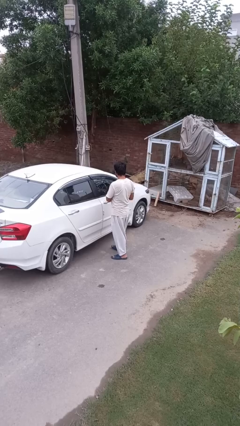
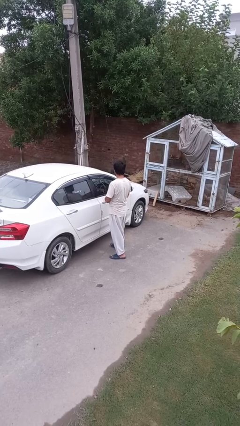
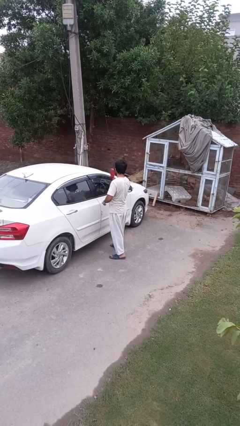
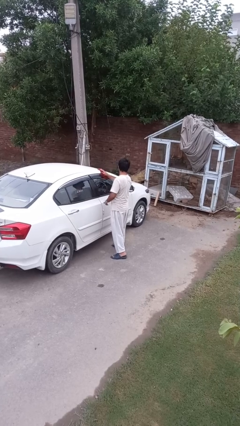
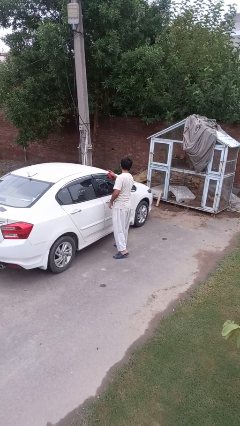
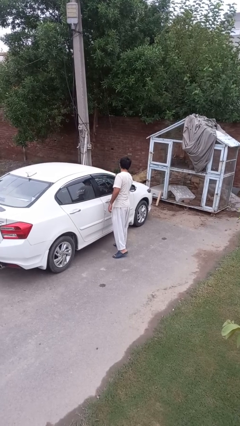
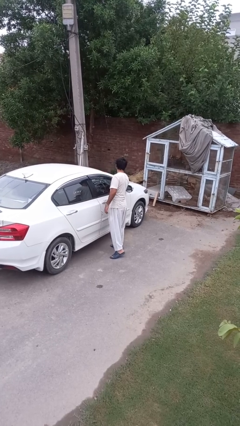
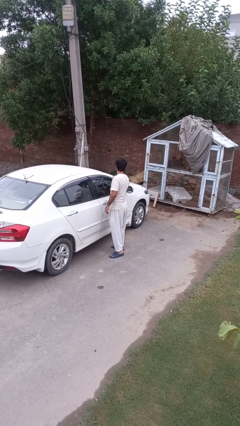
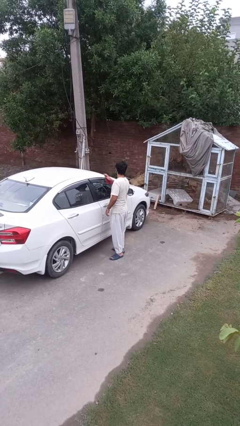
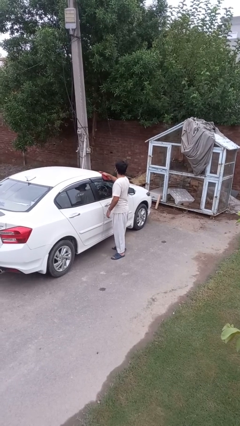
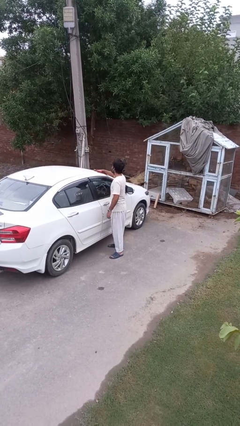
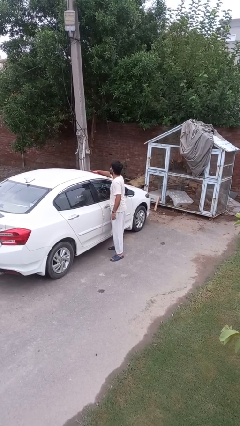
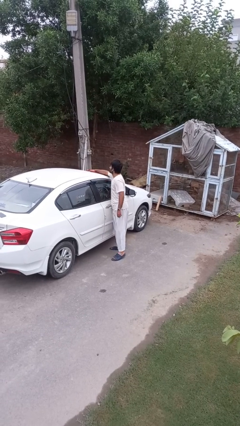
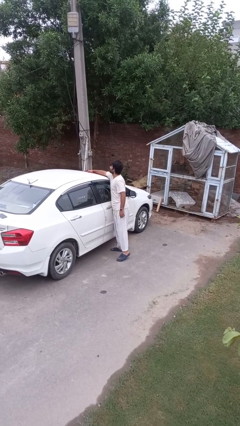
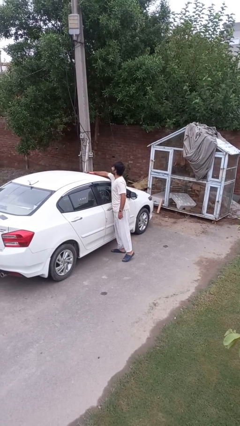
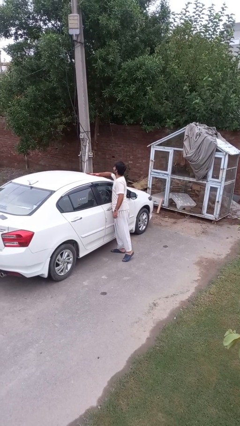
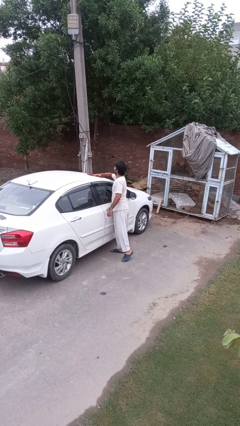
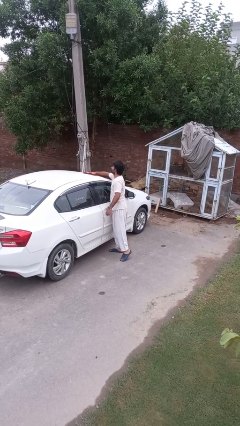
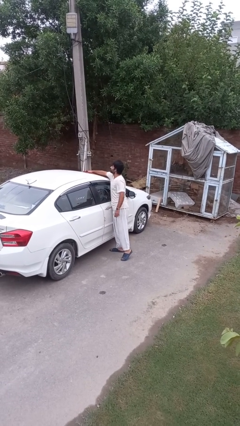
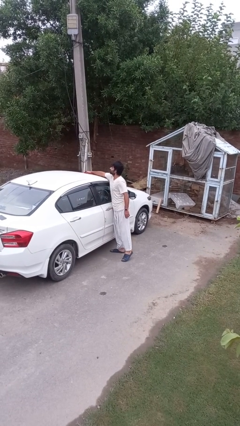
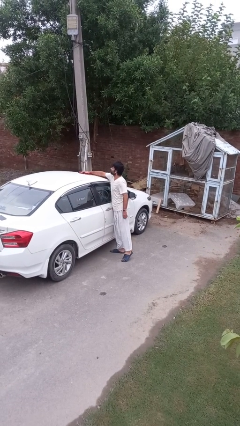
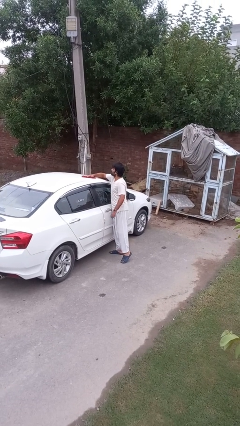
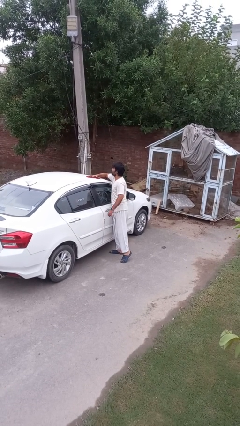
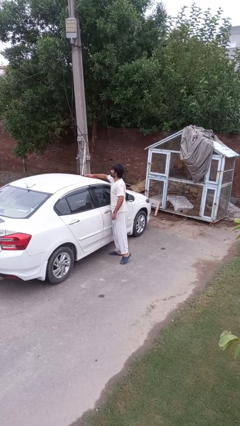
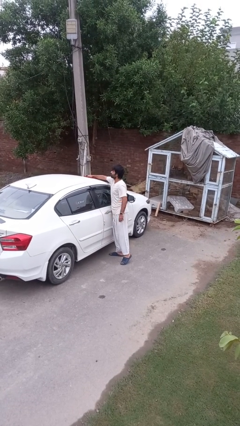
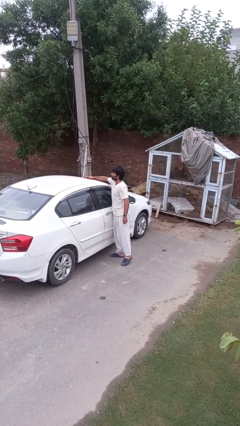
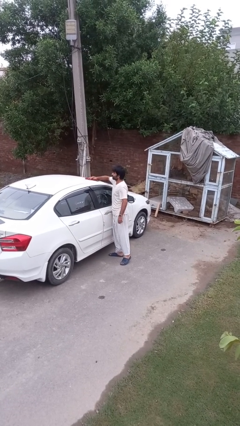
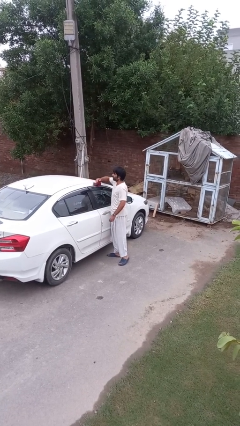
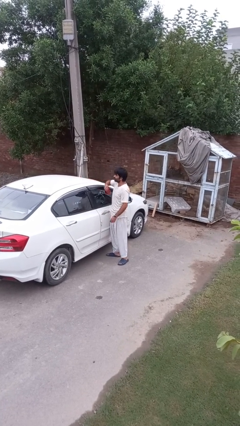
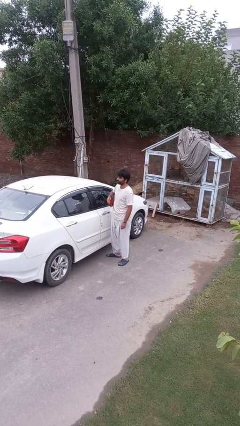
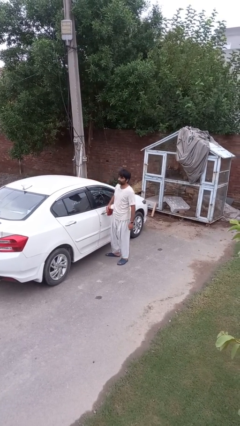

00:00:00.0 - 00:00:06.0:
person polishes car with rag

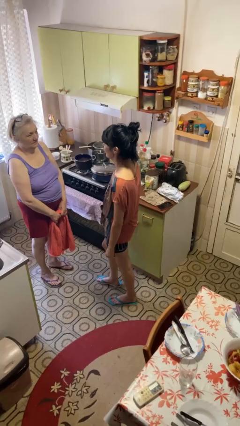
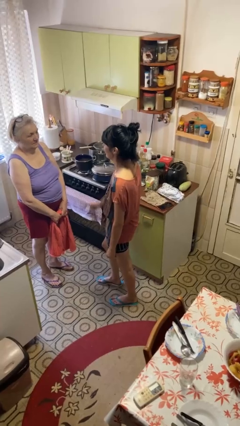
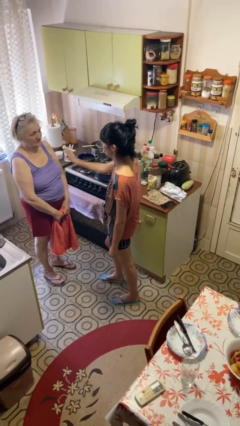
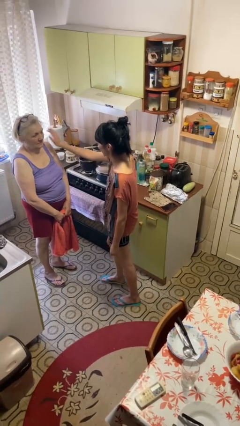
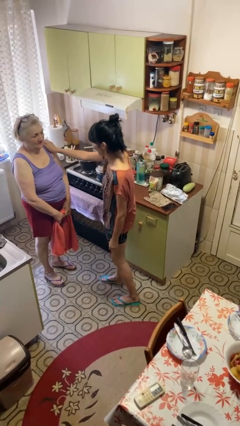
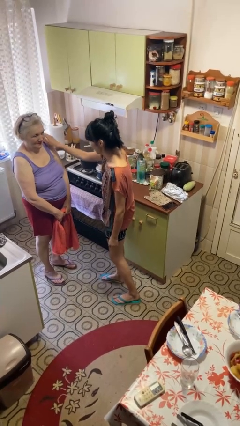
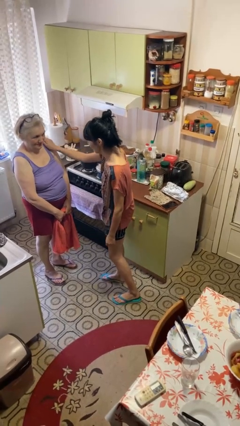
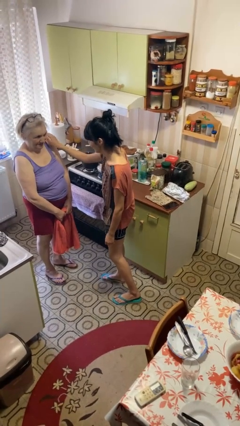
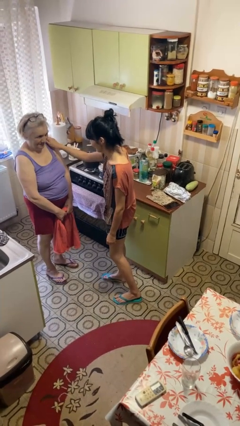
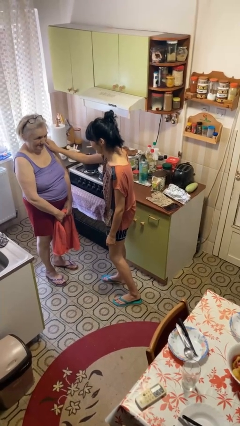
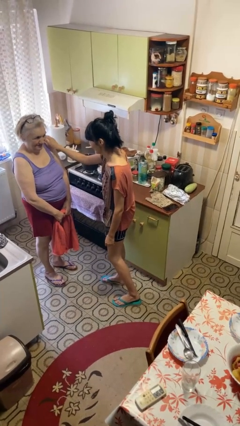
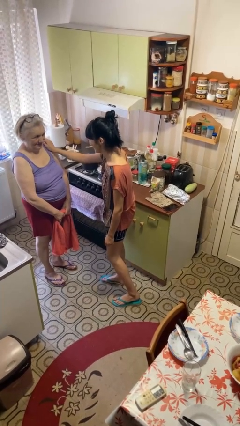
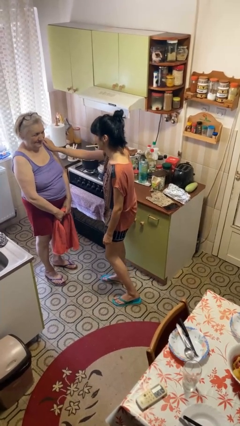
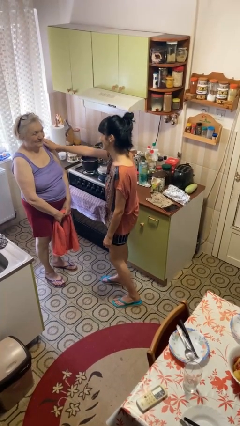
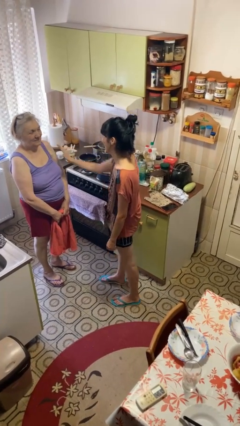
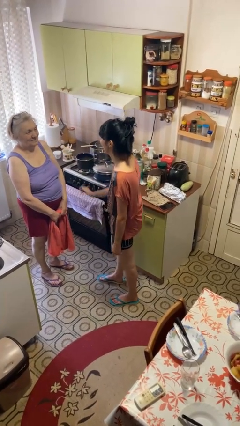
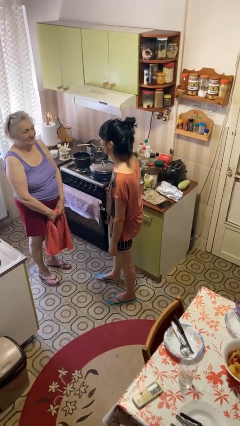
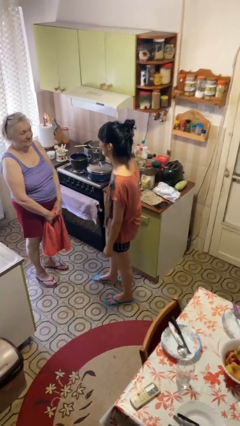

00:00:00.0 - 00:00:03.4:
person pounds shoulders of person

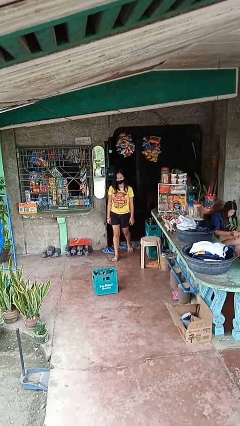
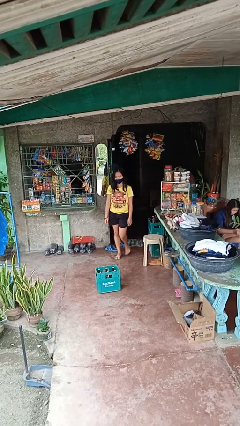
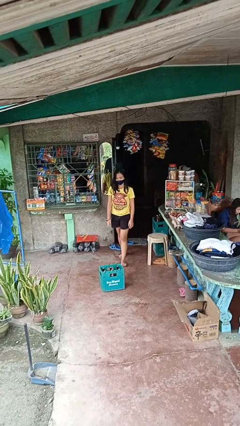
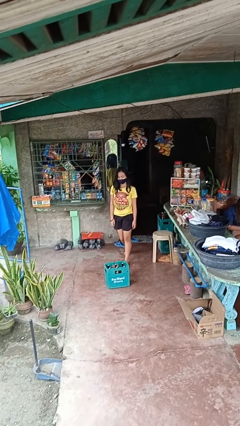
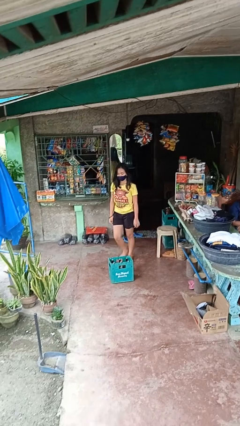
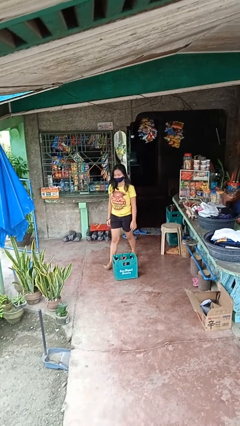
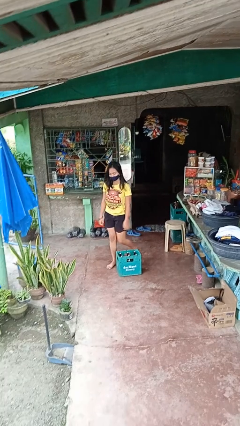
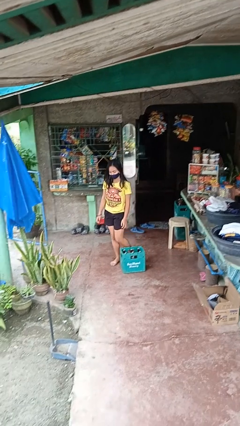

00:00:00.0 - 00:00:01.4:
person trips on object on floor

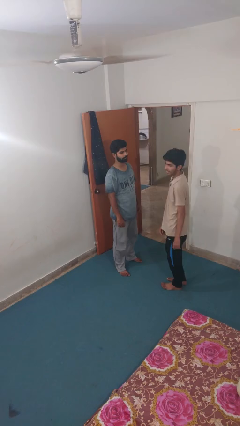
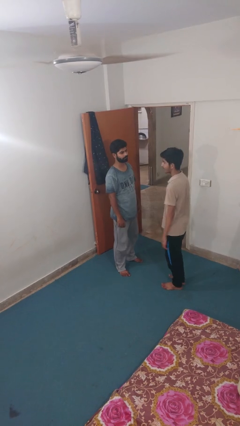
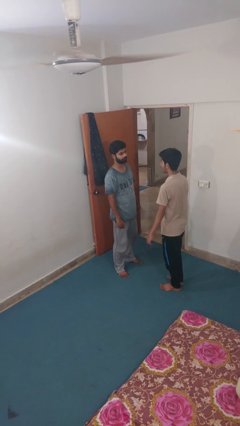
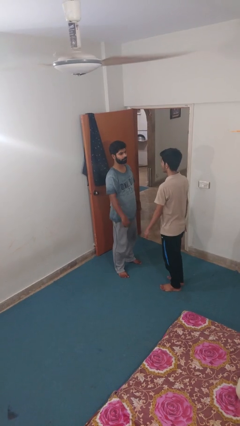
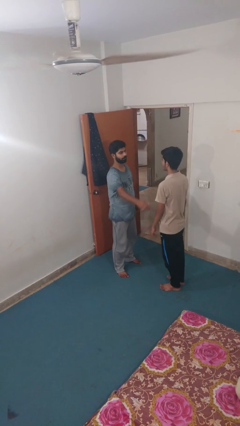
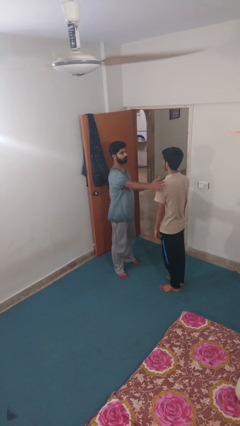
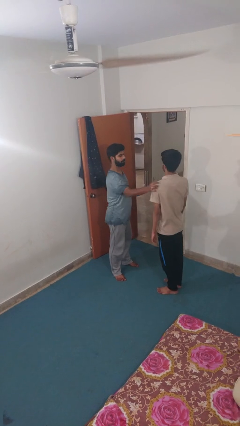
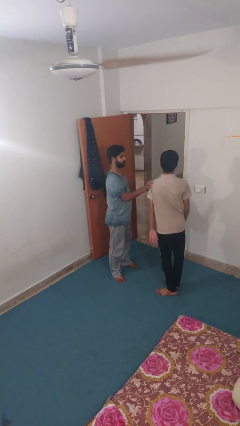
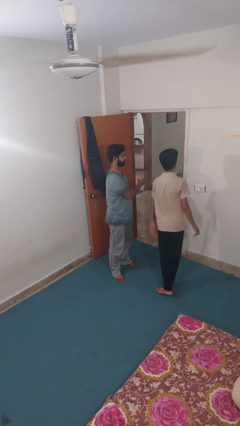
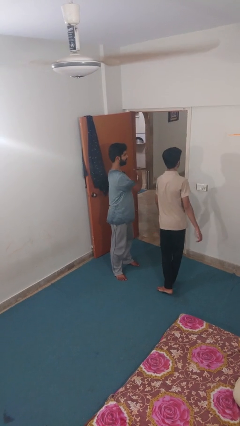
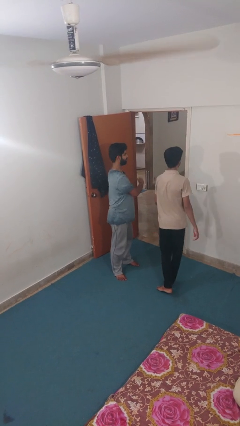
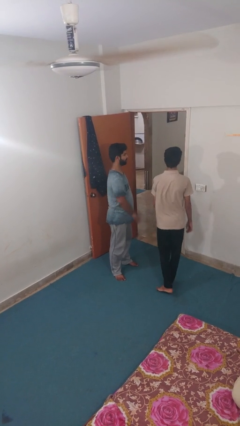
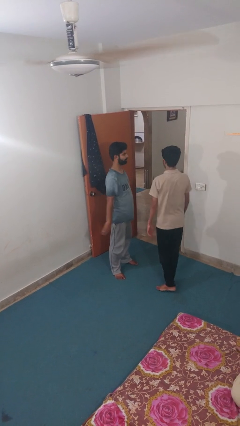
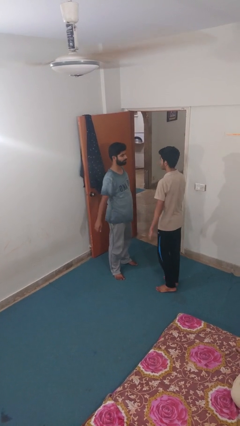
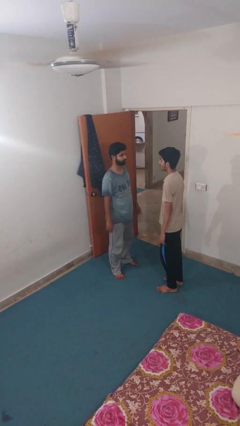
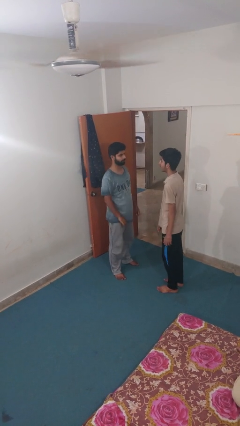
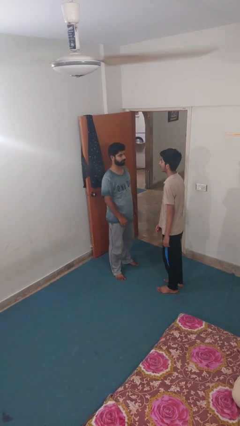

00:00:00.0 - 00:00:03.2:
person shoves person

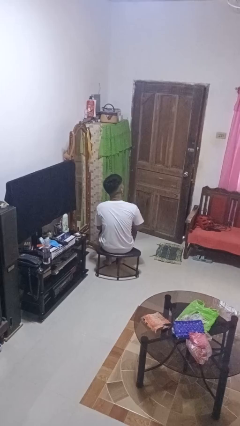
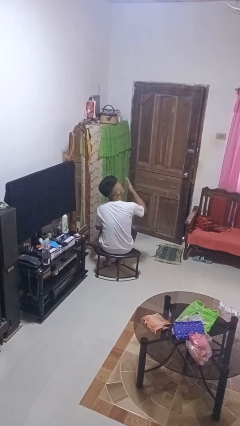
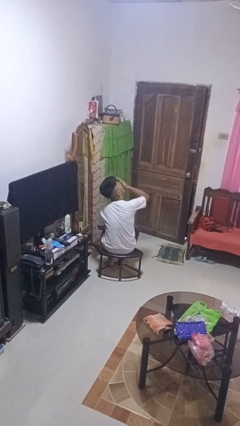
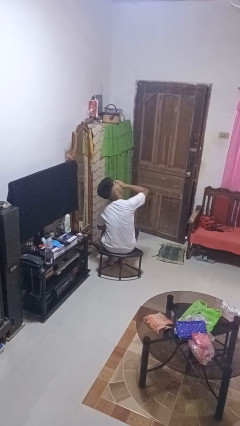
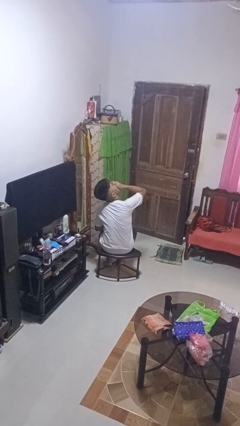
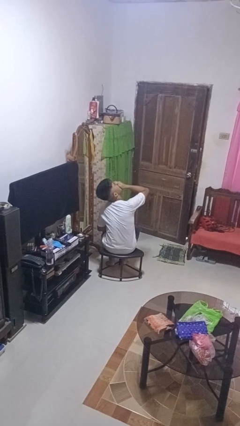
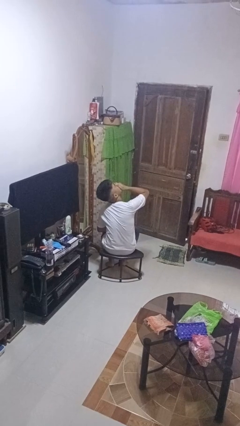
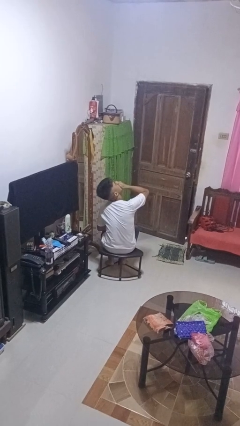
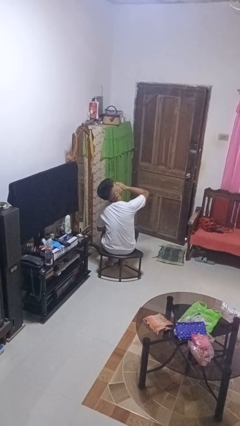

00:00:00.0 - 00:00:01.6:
person yawns

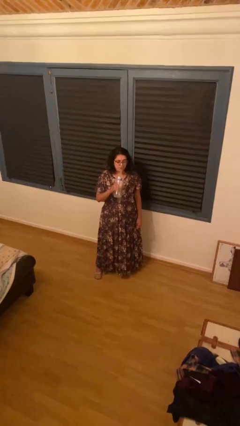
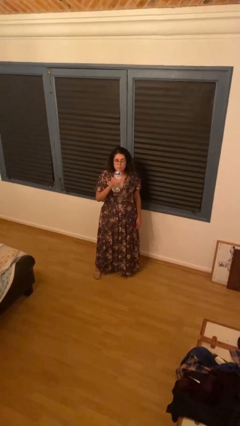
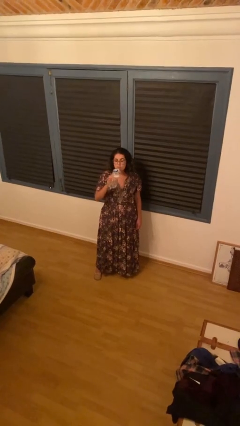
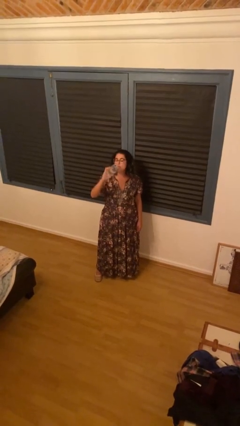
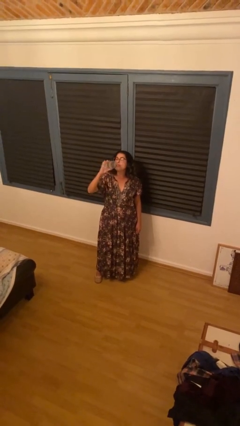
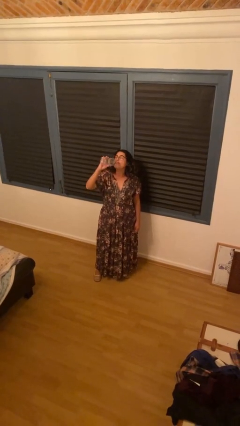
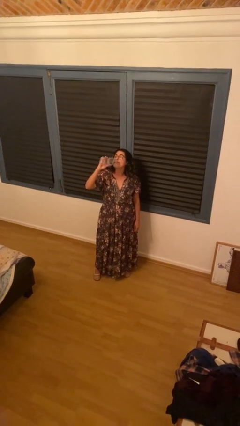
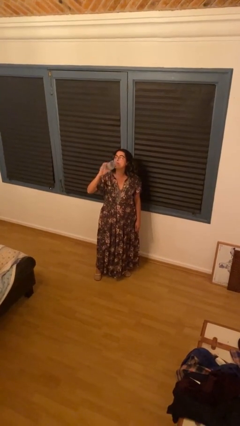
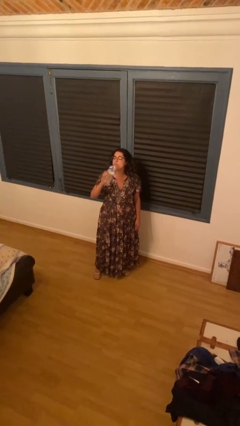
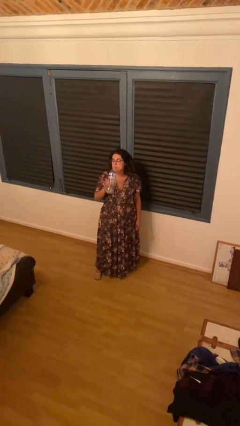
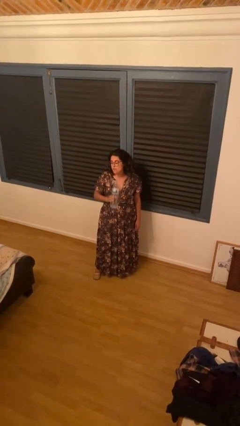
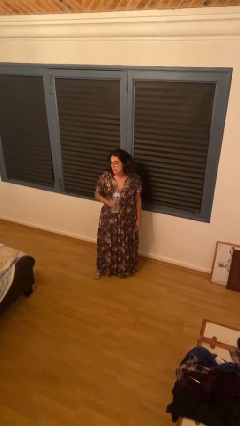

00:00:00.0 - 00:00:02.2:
person drinks from bottle

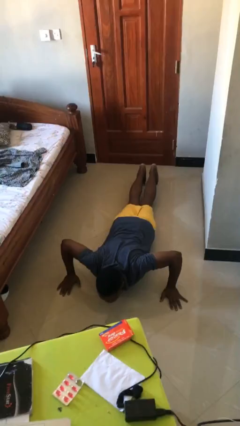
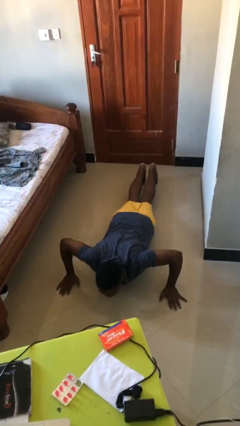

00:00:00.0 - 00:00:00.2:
person exercises with pushup
